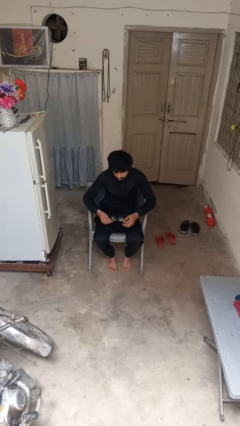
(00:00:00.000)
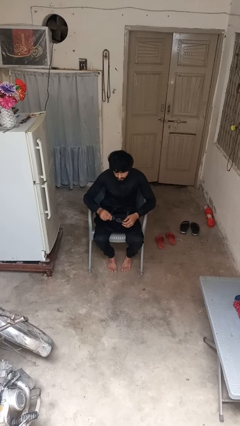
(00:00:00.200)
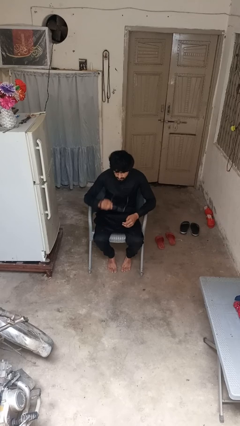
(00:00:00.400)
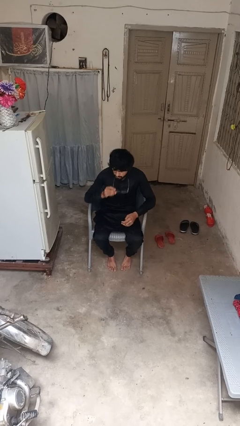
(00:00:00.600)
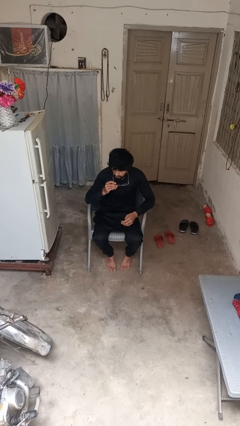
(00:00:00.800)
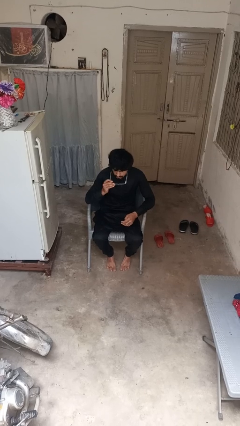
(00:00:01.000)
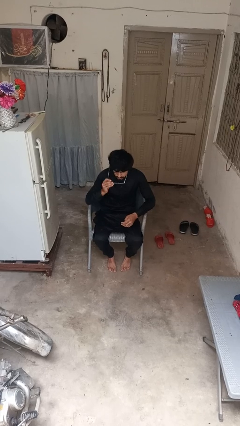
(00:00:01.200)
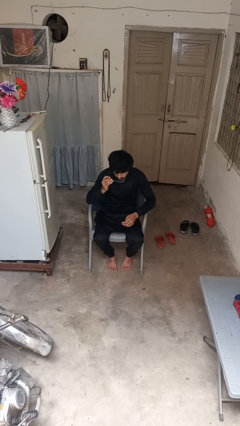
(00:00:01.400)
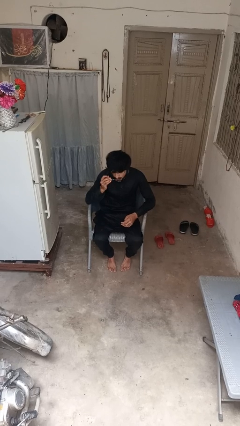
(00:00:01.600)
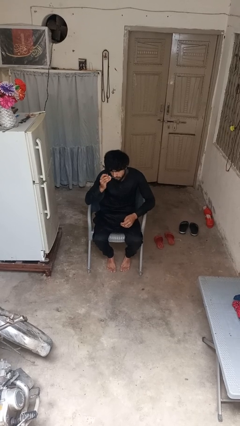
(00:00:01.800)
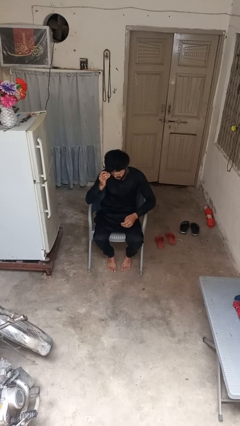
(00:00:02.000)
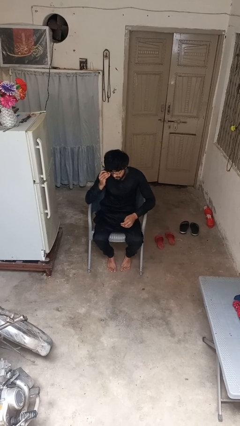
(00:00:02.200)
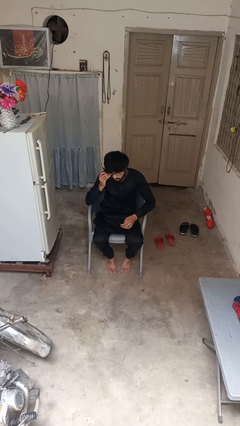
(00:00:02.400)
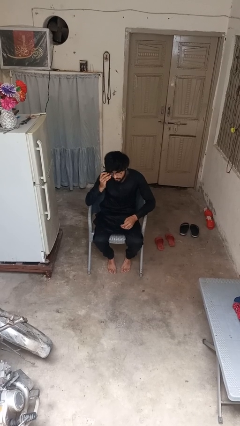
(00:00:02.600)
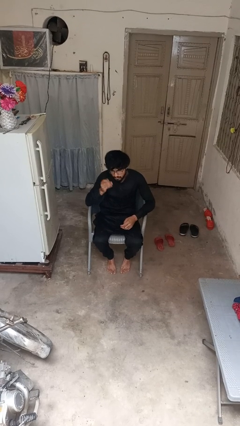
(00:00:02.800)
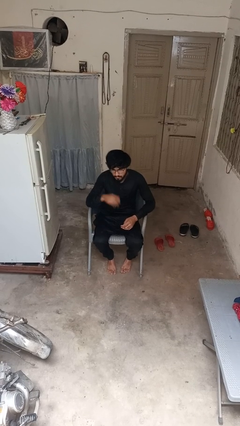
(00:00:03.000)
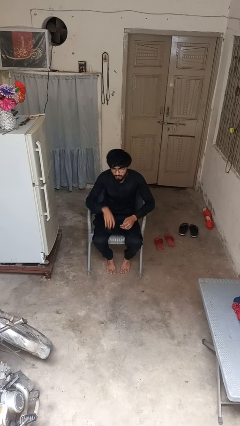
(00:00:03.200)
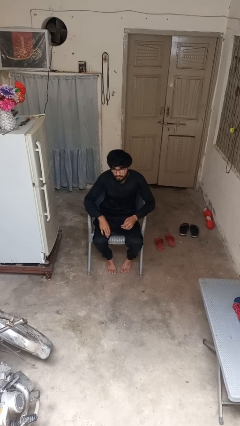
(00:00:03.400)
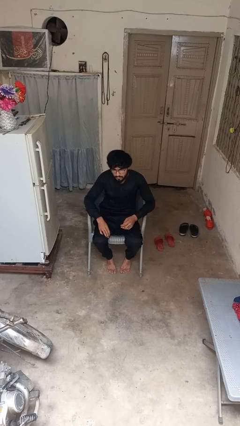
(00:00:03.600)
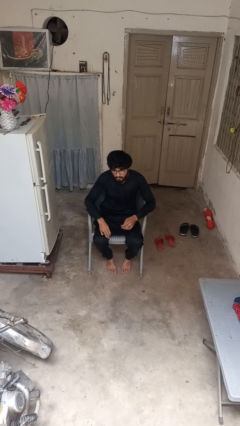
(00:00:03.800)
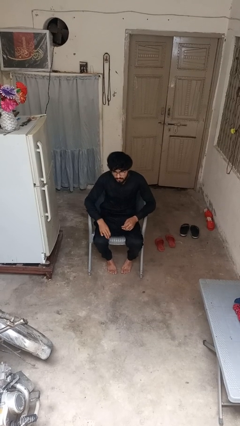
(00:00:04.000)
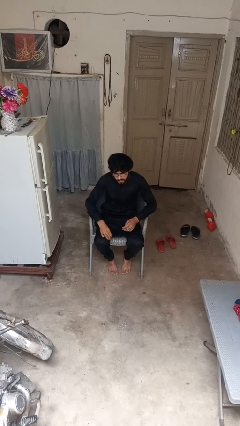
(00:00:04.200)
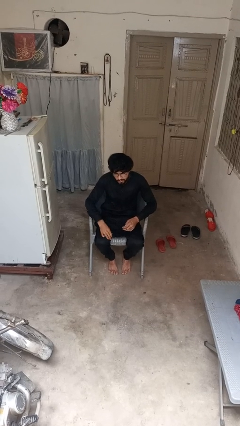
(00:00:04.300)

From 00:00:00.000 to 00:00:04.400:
person puts on glasses

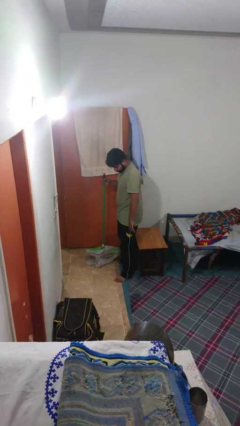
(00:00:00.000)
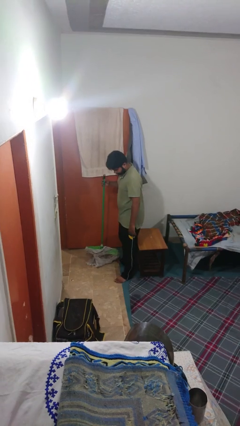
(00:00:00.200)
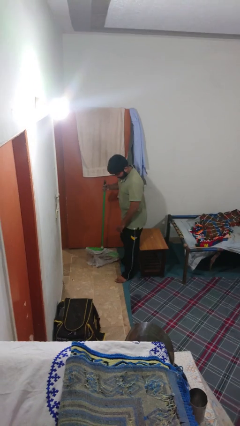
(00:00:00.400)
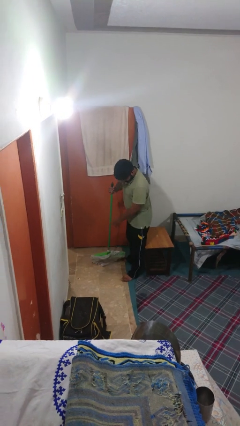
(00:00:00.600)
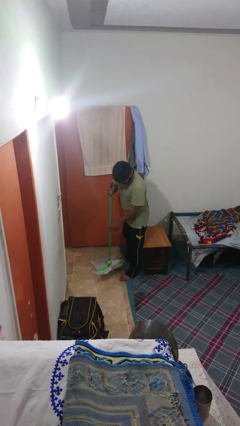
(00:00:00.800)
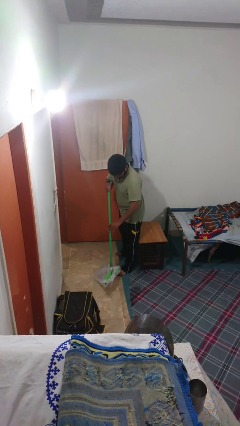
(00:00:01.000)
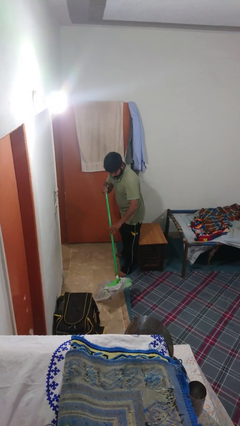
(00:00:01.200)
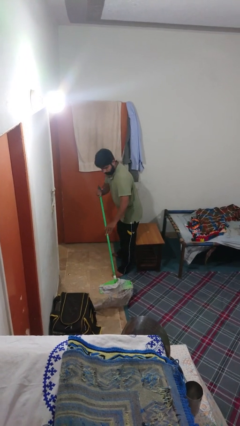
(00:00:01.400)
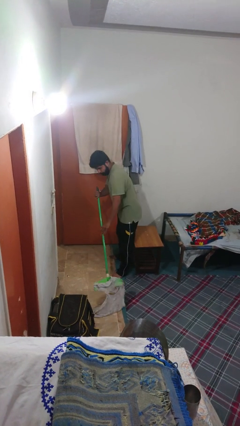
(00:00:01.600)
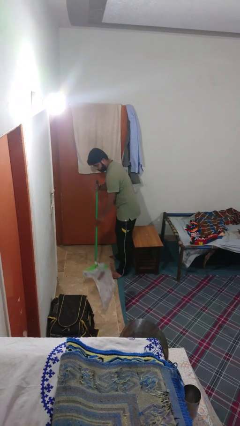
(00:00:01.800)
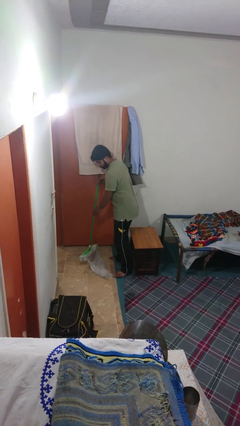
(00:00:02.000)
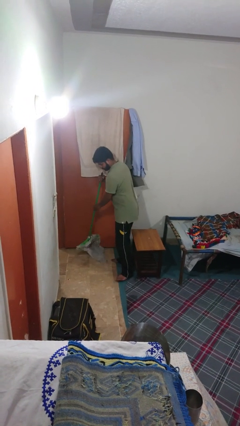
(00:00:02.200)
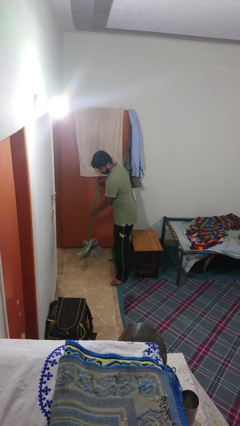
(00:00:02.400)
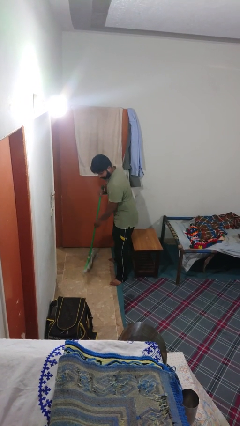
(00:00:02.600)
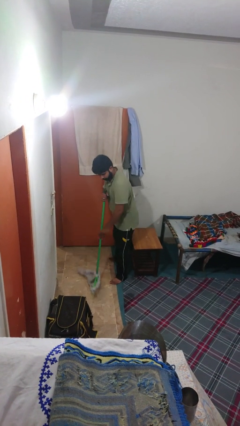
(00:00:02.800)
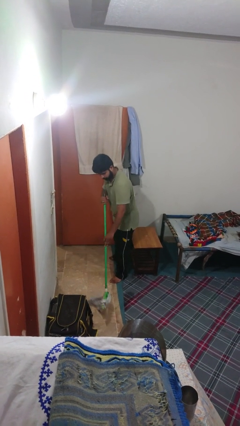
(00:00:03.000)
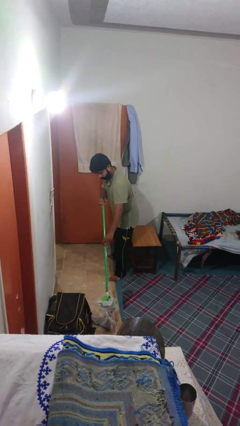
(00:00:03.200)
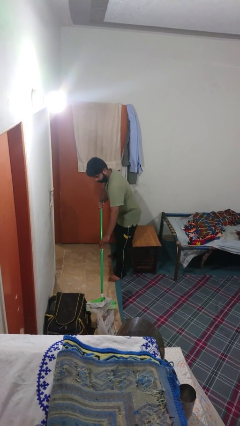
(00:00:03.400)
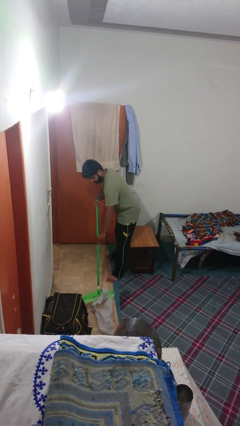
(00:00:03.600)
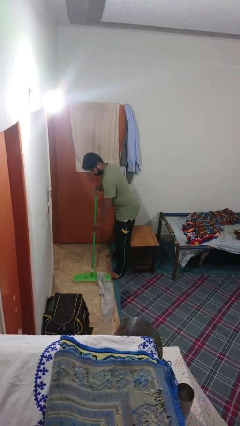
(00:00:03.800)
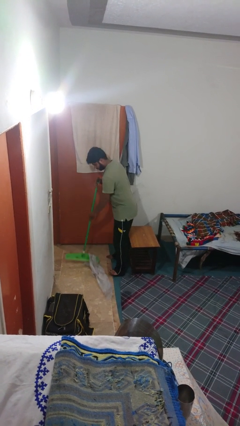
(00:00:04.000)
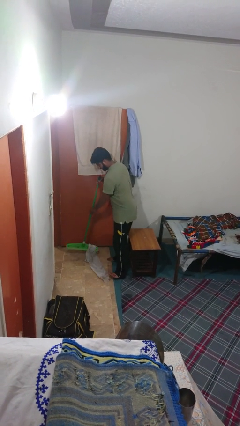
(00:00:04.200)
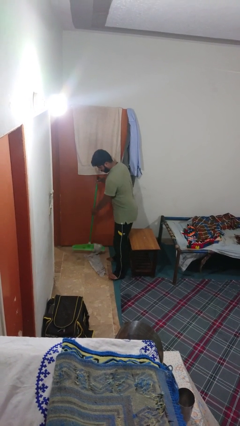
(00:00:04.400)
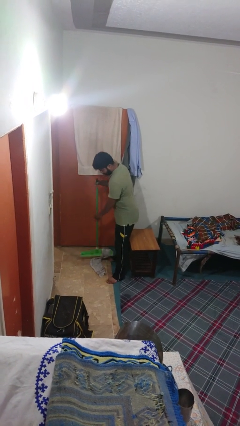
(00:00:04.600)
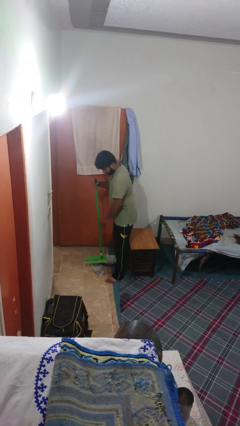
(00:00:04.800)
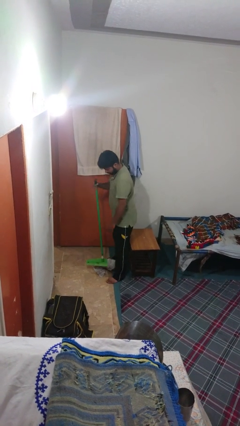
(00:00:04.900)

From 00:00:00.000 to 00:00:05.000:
person mops

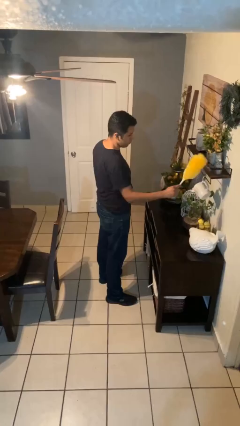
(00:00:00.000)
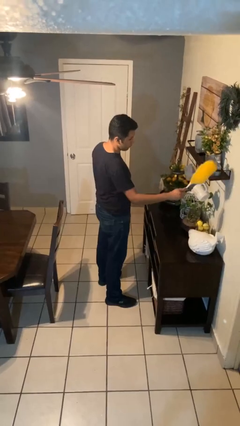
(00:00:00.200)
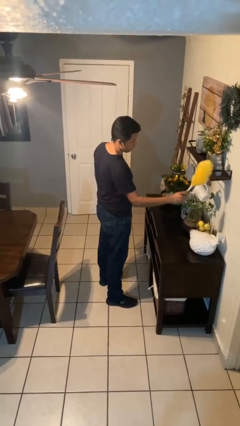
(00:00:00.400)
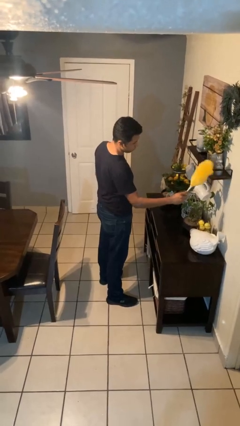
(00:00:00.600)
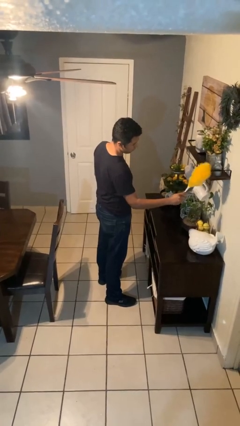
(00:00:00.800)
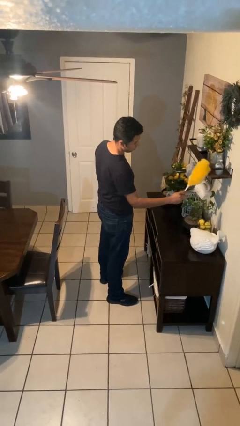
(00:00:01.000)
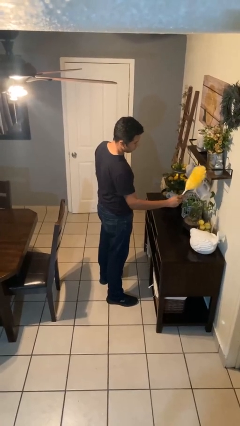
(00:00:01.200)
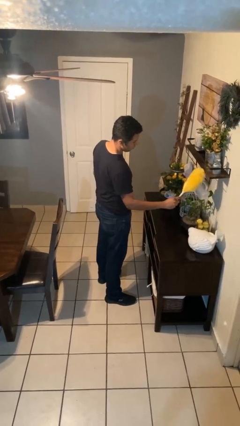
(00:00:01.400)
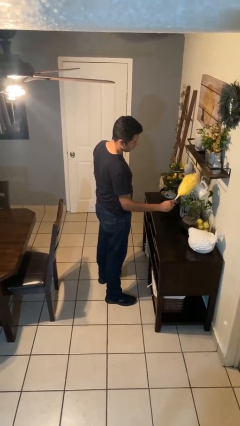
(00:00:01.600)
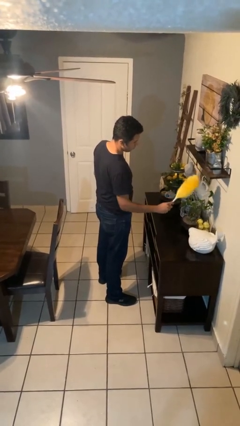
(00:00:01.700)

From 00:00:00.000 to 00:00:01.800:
person dusts furniture

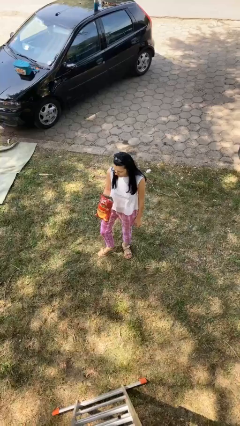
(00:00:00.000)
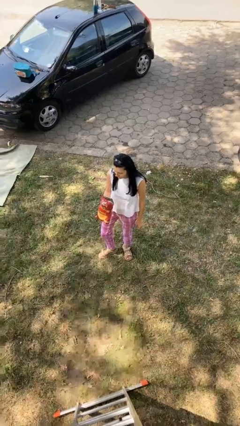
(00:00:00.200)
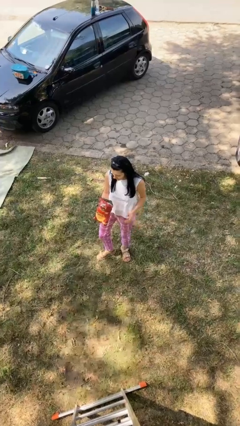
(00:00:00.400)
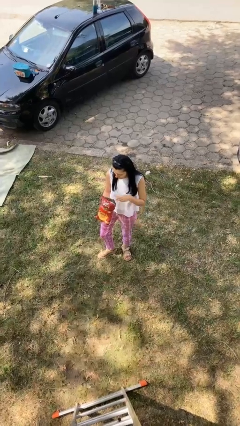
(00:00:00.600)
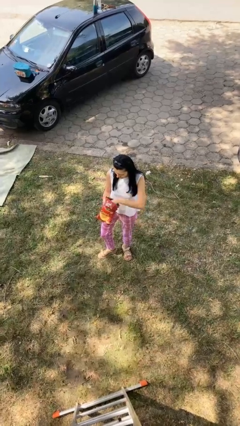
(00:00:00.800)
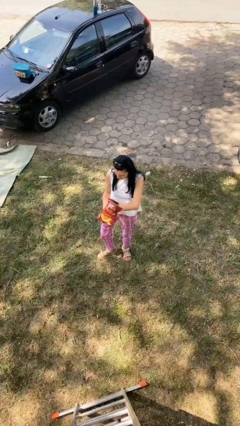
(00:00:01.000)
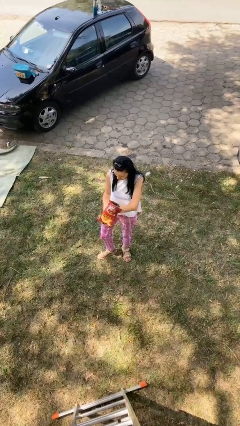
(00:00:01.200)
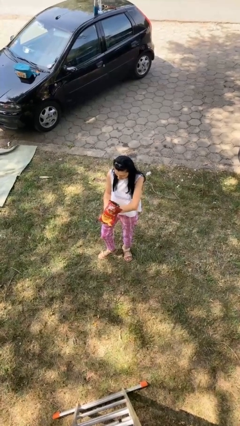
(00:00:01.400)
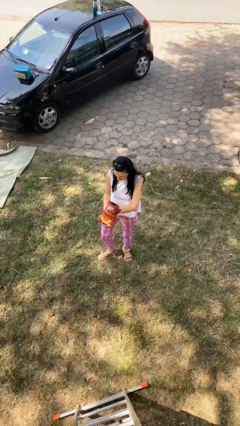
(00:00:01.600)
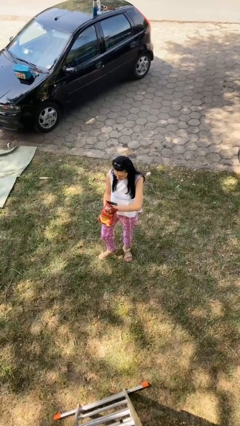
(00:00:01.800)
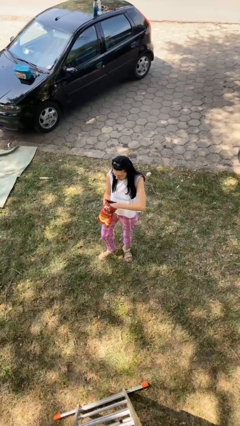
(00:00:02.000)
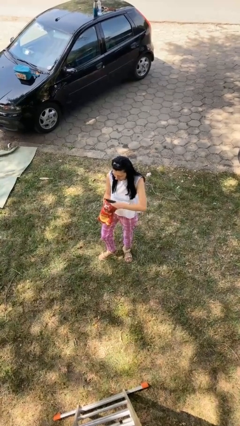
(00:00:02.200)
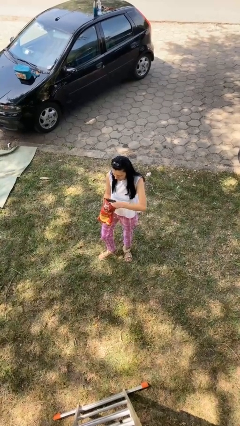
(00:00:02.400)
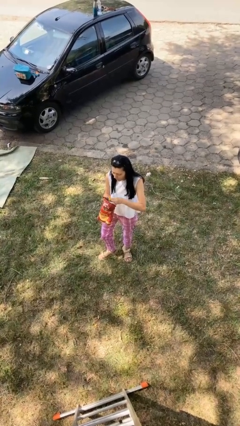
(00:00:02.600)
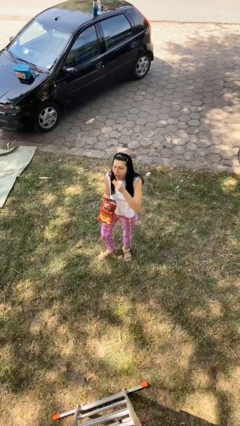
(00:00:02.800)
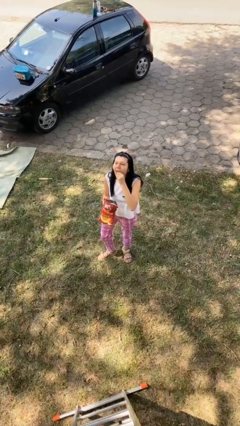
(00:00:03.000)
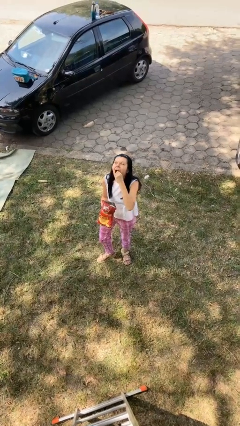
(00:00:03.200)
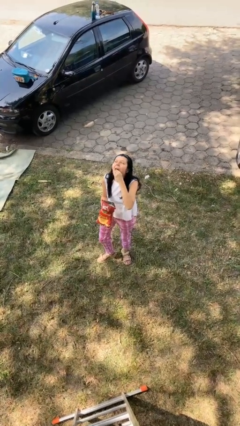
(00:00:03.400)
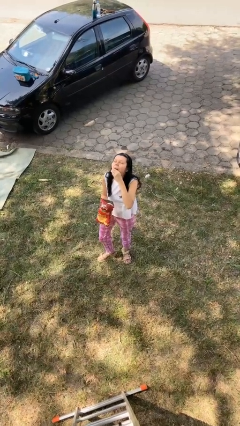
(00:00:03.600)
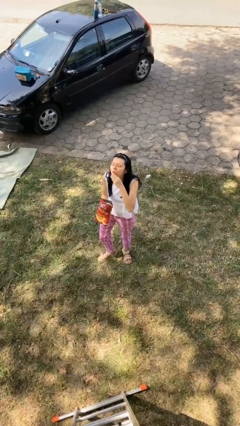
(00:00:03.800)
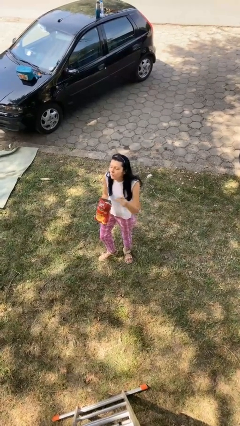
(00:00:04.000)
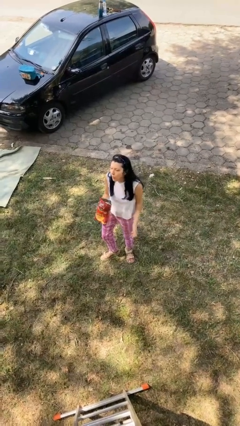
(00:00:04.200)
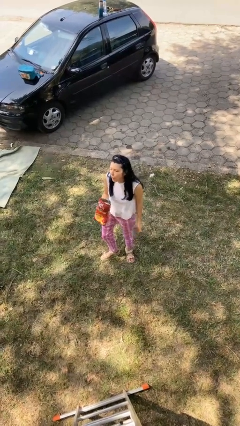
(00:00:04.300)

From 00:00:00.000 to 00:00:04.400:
person eats snack from bag

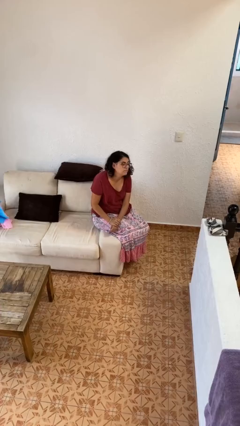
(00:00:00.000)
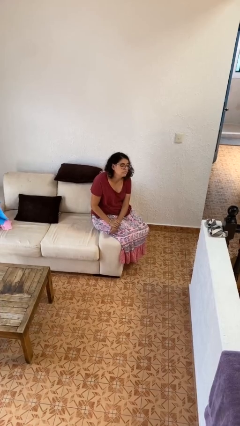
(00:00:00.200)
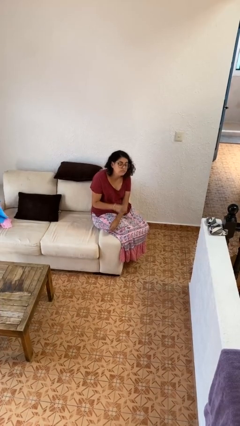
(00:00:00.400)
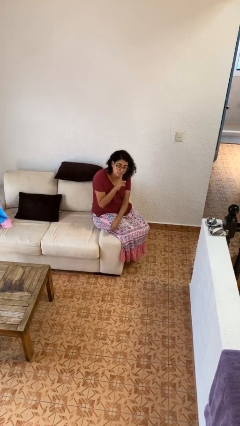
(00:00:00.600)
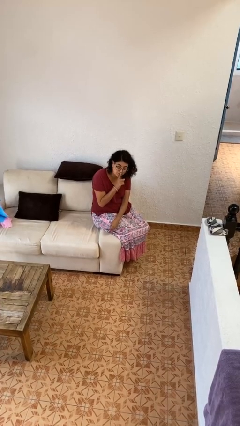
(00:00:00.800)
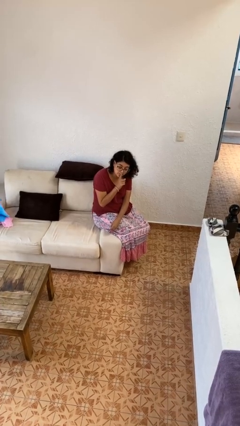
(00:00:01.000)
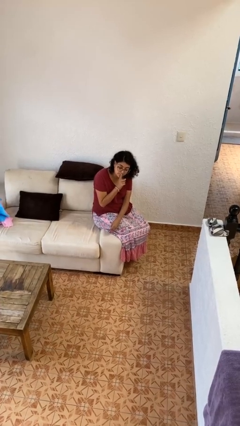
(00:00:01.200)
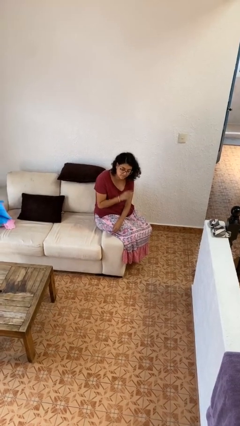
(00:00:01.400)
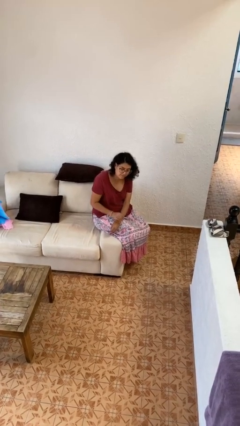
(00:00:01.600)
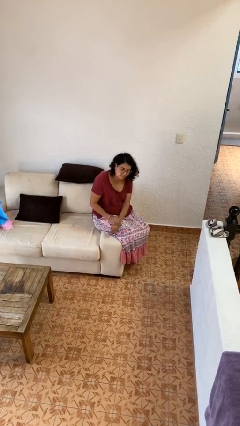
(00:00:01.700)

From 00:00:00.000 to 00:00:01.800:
person gestures be quiet
